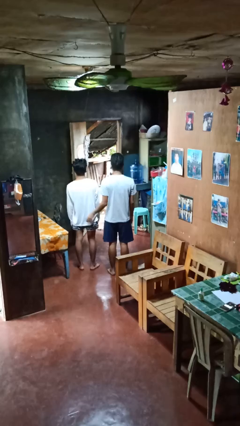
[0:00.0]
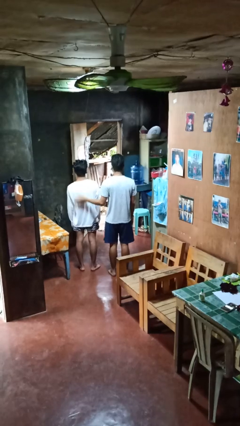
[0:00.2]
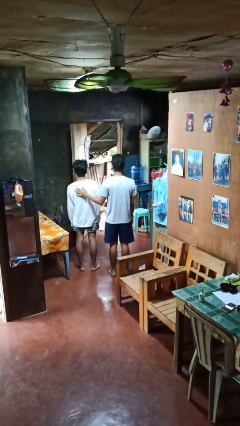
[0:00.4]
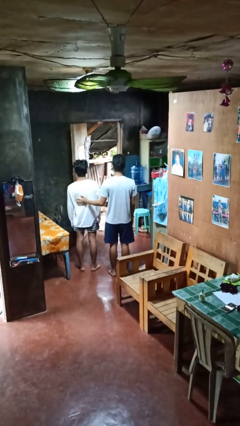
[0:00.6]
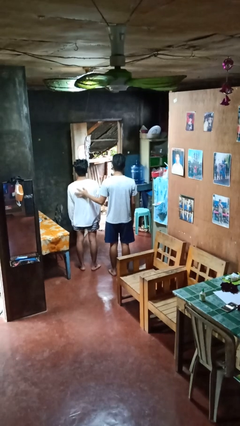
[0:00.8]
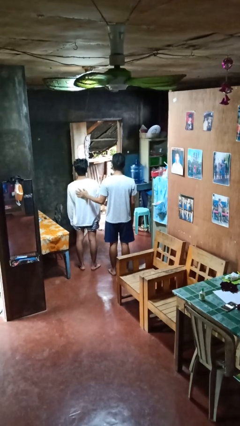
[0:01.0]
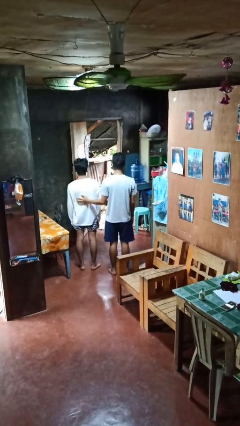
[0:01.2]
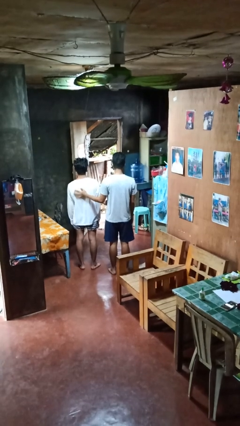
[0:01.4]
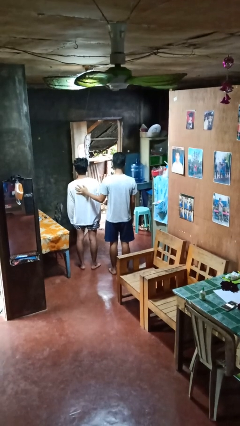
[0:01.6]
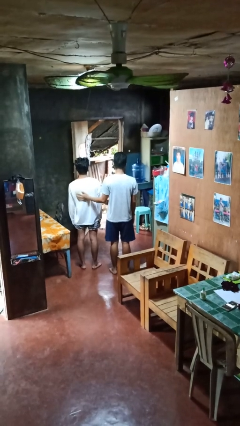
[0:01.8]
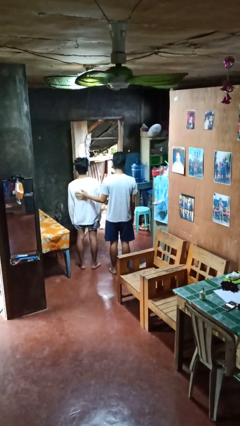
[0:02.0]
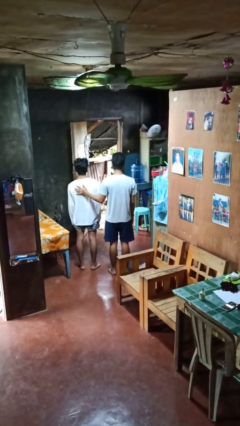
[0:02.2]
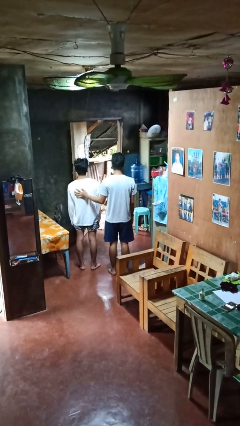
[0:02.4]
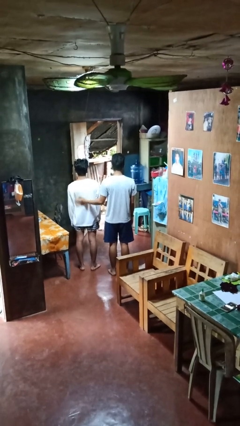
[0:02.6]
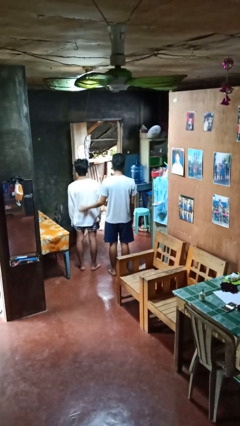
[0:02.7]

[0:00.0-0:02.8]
person touches back of person

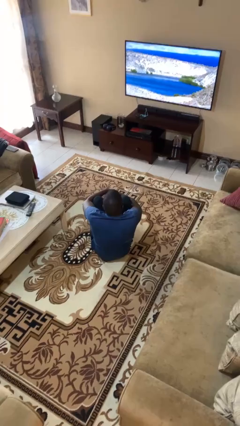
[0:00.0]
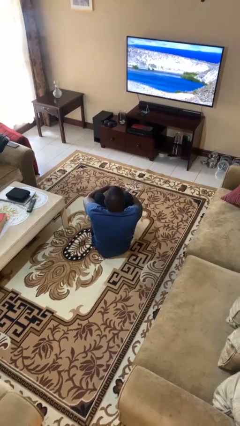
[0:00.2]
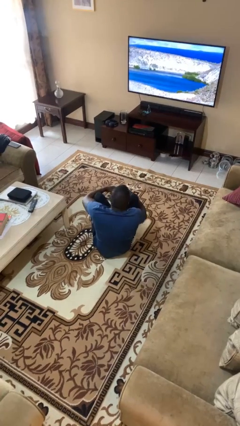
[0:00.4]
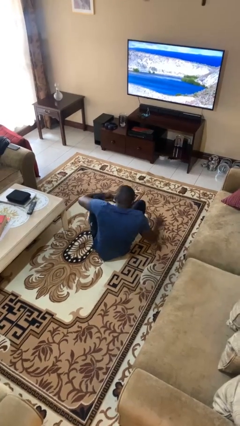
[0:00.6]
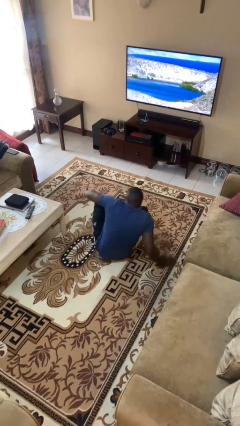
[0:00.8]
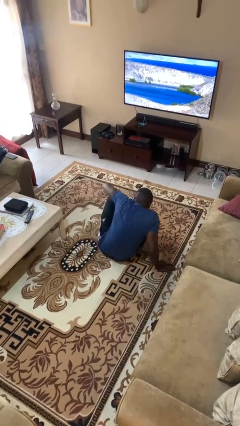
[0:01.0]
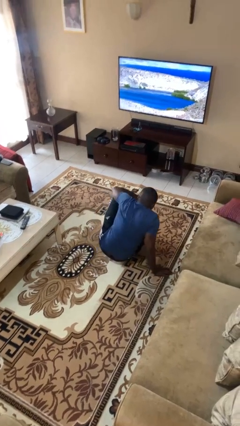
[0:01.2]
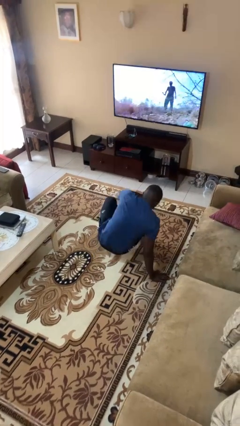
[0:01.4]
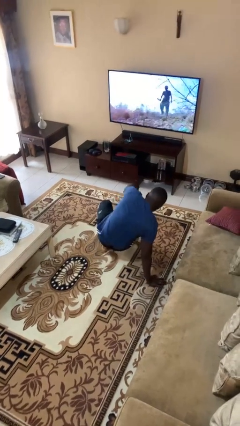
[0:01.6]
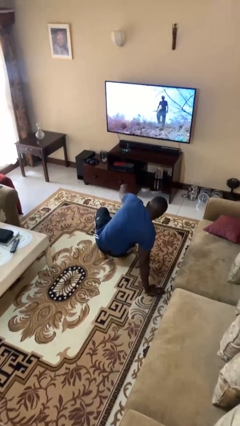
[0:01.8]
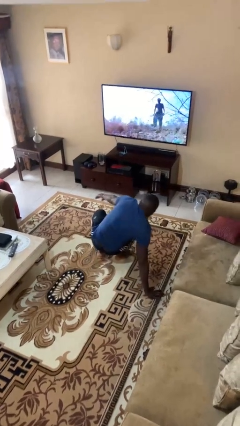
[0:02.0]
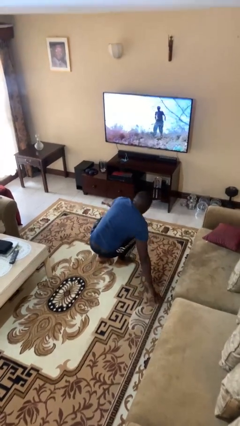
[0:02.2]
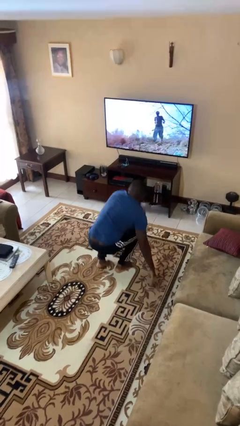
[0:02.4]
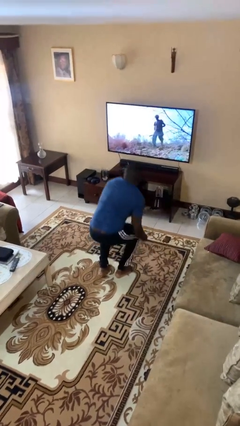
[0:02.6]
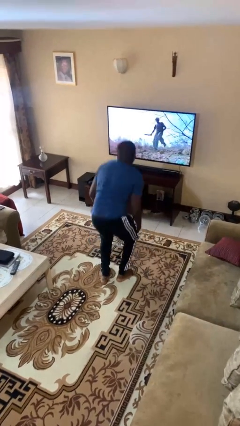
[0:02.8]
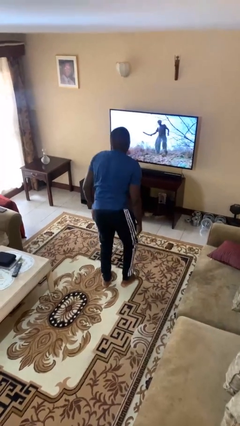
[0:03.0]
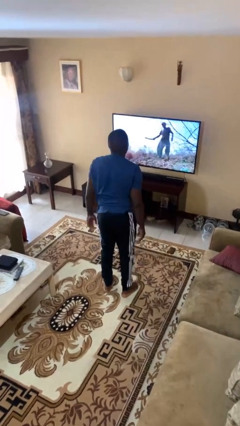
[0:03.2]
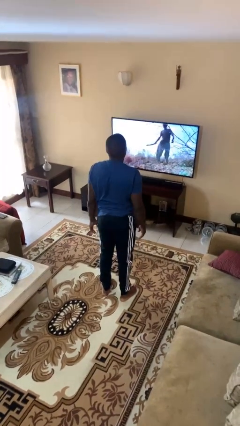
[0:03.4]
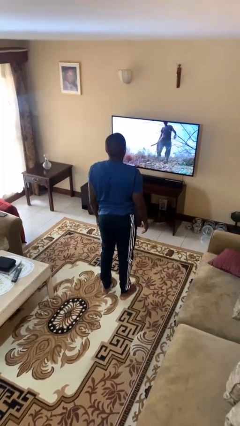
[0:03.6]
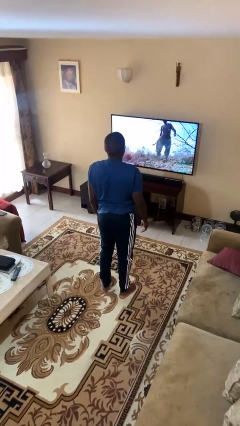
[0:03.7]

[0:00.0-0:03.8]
person stands up from floor

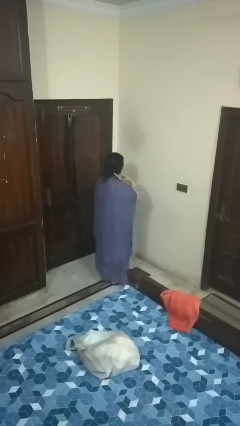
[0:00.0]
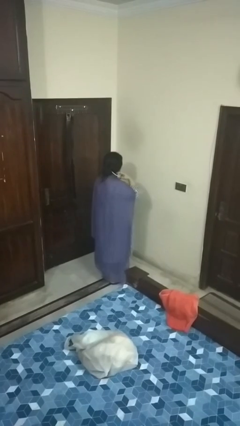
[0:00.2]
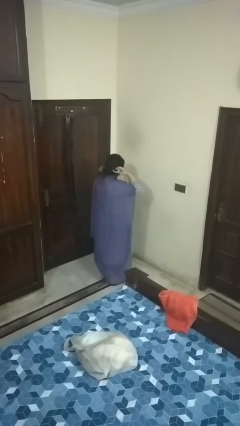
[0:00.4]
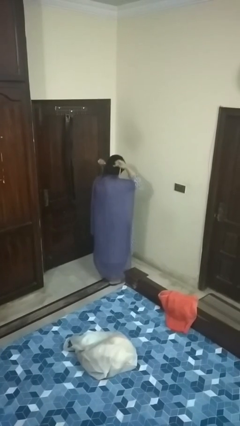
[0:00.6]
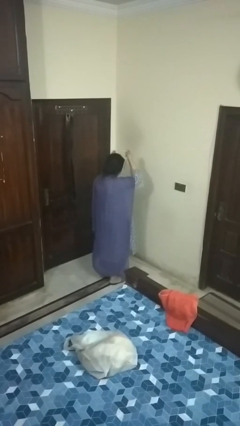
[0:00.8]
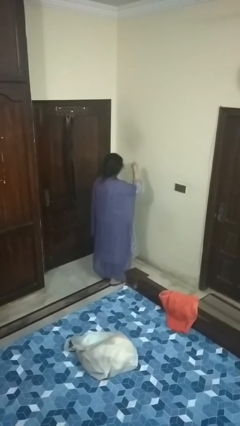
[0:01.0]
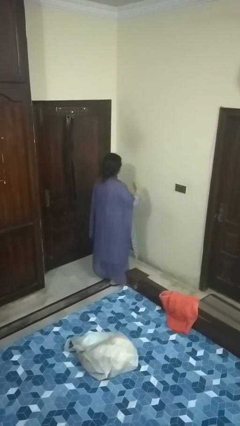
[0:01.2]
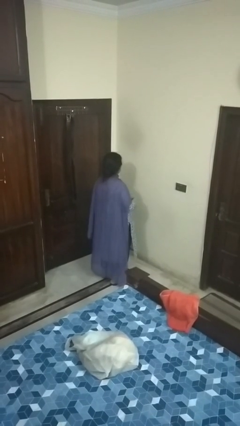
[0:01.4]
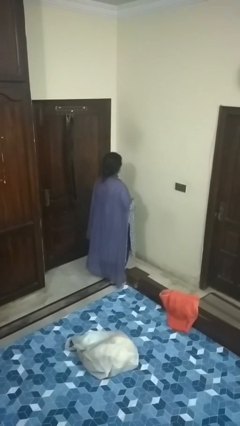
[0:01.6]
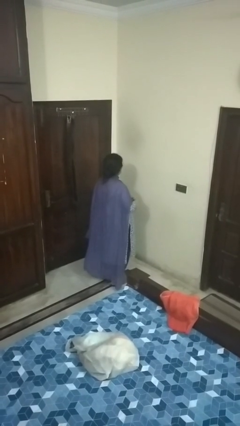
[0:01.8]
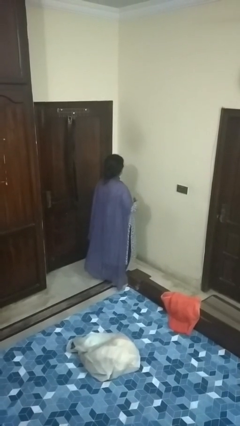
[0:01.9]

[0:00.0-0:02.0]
person takes off necklace

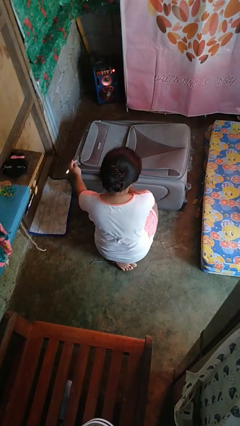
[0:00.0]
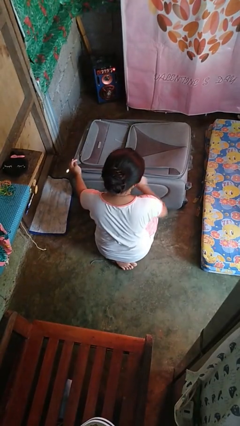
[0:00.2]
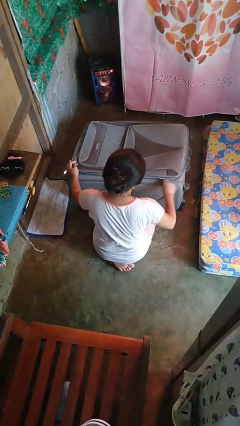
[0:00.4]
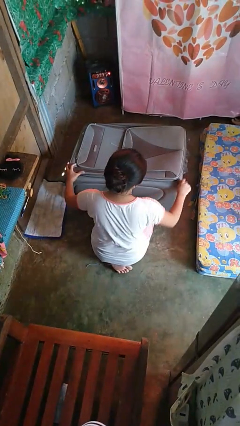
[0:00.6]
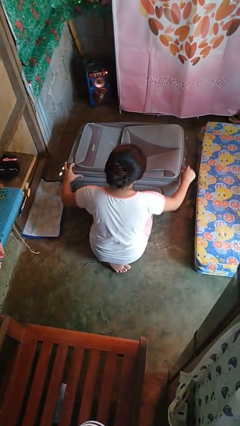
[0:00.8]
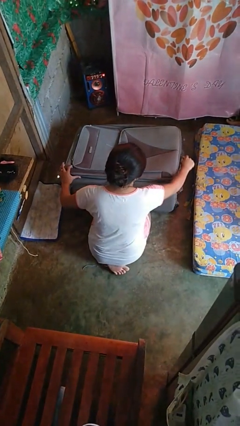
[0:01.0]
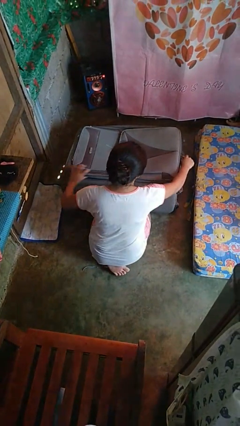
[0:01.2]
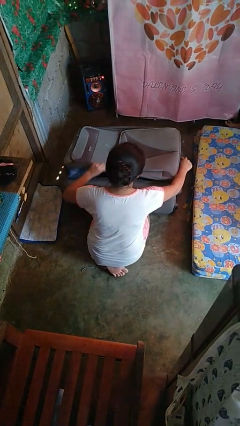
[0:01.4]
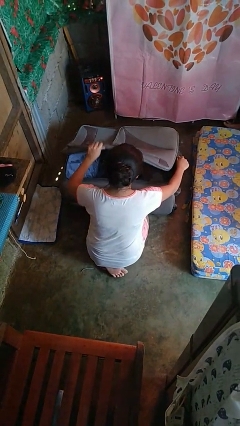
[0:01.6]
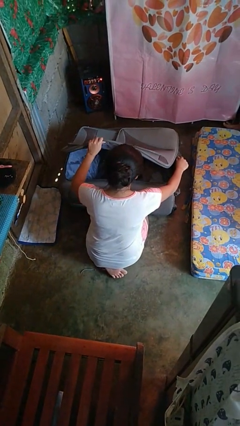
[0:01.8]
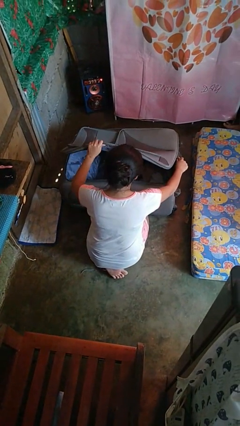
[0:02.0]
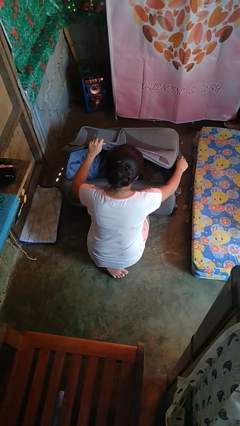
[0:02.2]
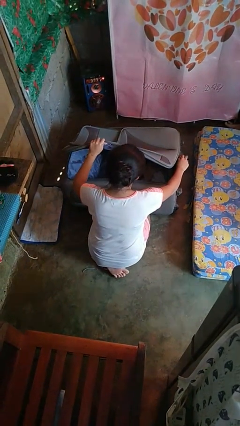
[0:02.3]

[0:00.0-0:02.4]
person opens suitcase

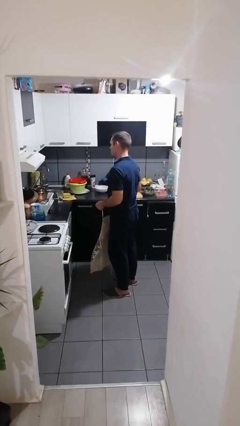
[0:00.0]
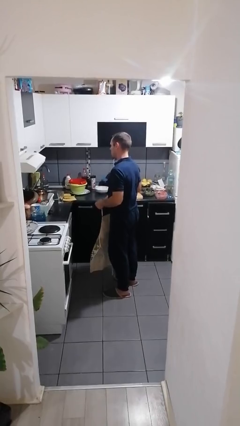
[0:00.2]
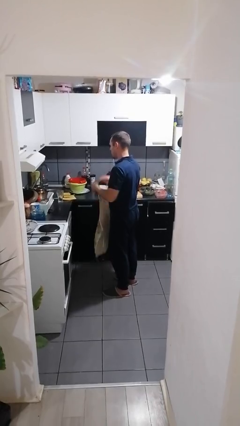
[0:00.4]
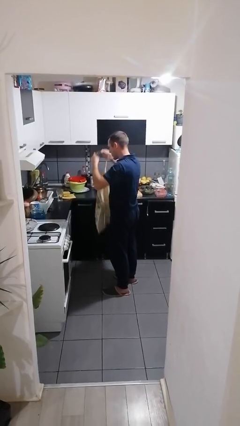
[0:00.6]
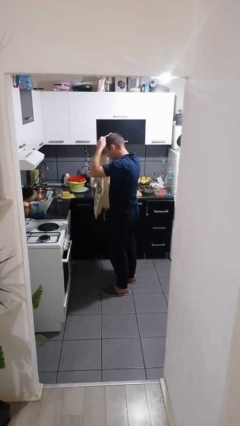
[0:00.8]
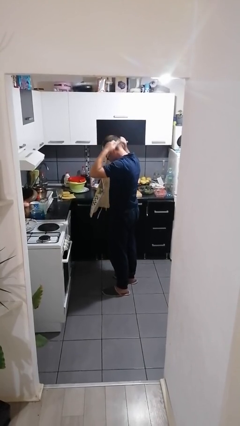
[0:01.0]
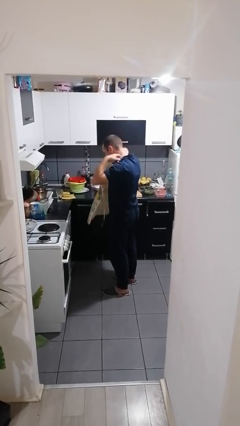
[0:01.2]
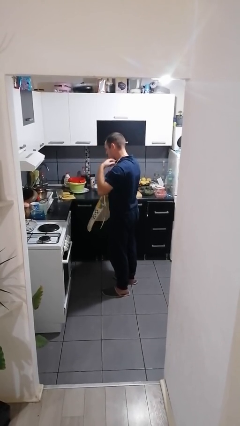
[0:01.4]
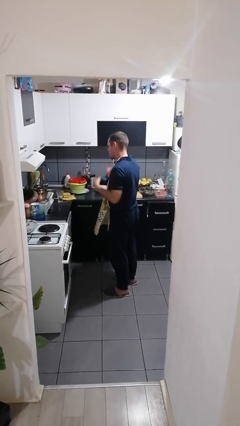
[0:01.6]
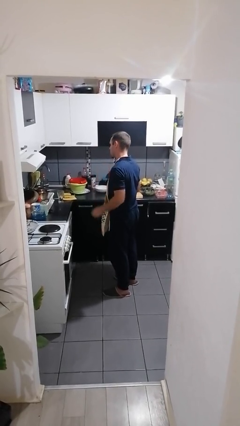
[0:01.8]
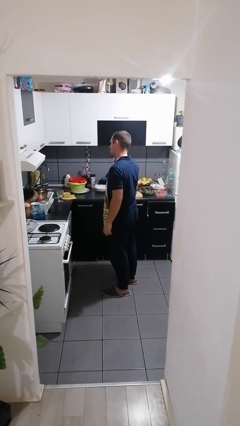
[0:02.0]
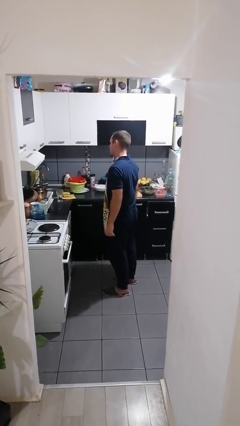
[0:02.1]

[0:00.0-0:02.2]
person puts on apron

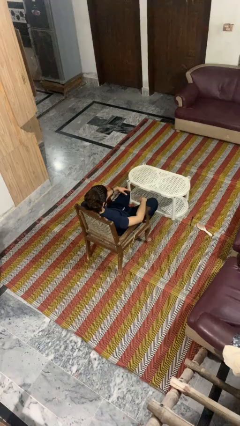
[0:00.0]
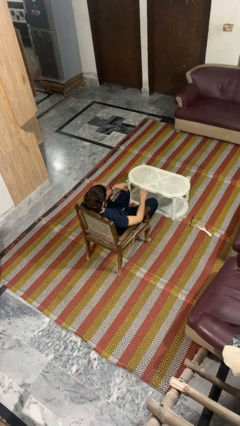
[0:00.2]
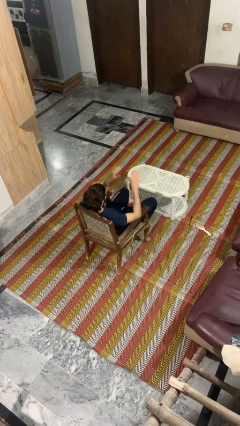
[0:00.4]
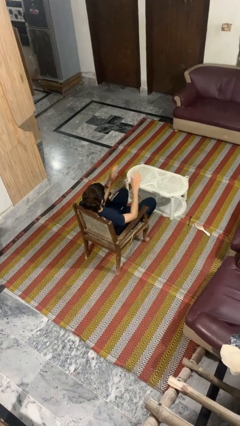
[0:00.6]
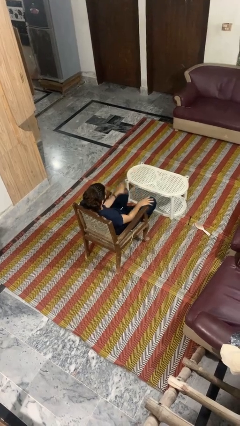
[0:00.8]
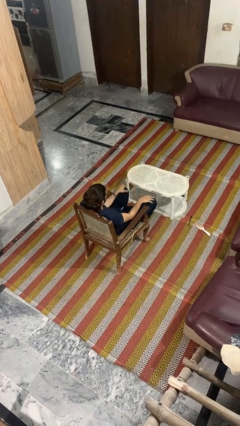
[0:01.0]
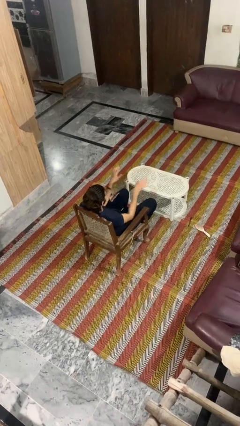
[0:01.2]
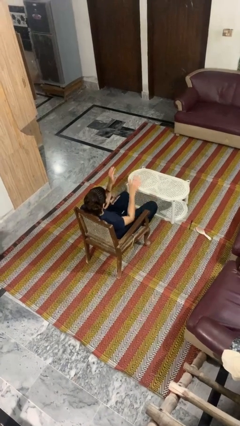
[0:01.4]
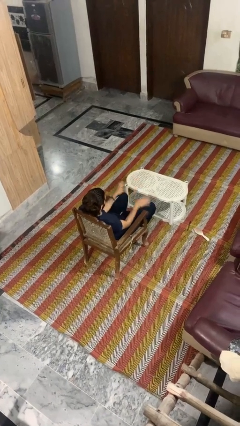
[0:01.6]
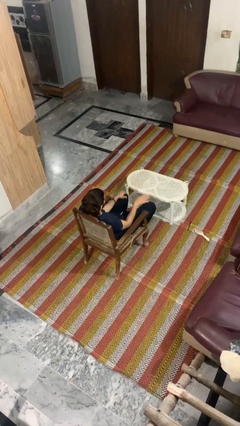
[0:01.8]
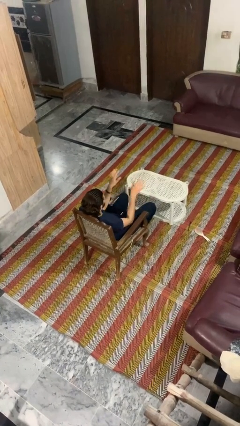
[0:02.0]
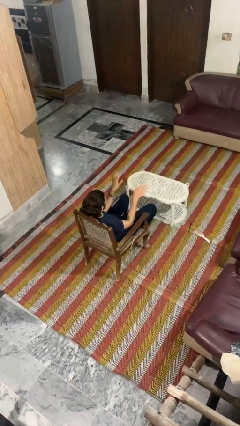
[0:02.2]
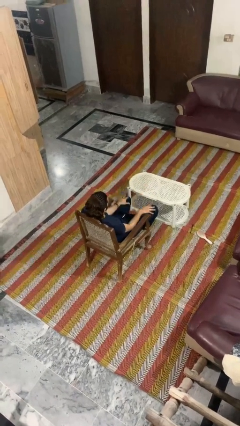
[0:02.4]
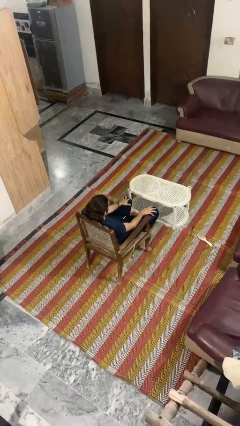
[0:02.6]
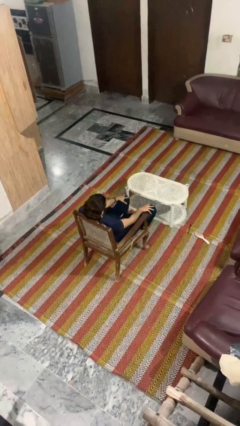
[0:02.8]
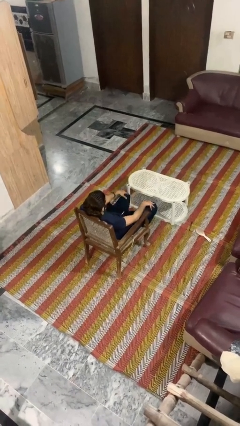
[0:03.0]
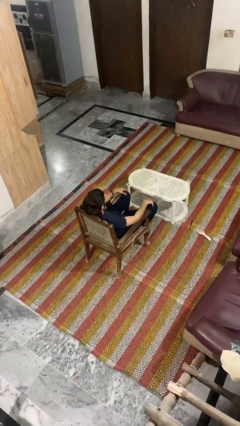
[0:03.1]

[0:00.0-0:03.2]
person slaps hands on thighs

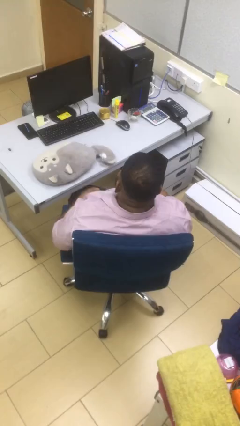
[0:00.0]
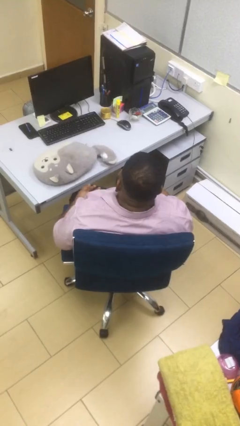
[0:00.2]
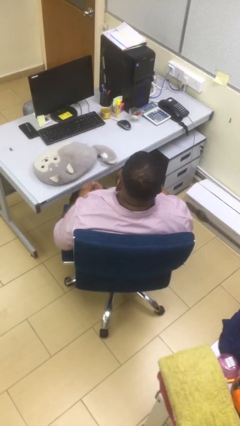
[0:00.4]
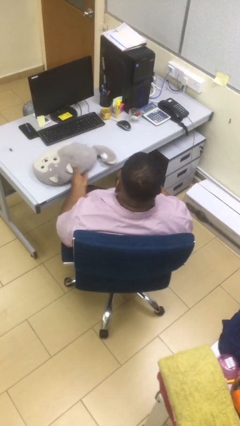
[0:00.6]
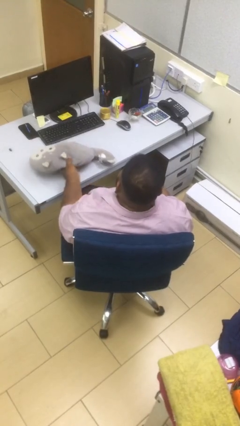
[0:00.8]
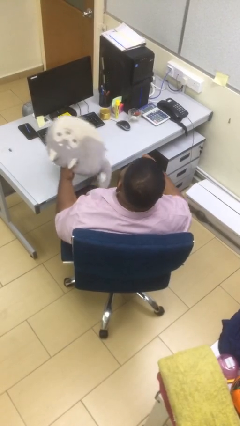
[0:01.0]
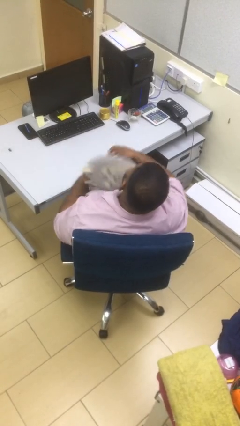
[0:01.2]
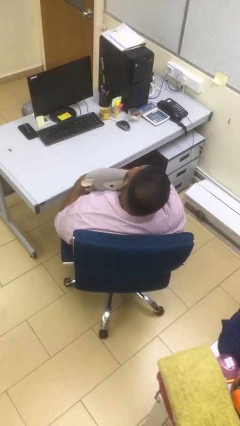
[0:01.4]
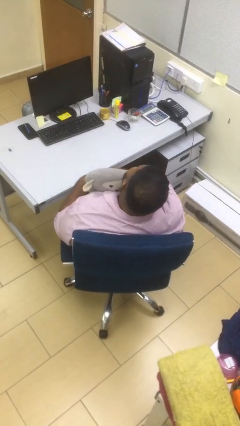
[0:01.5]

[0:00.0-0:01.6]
person hugs stuffed animal
